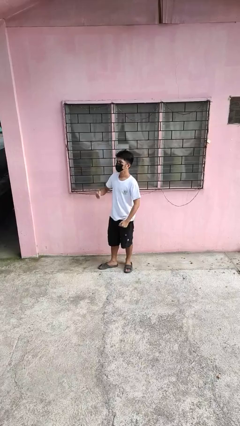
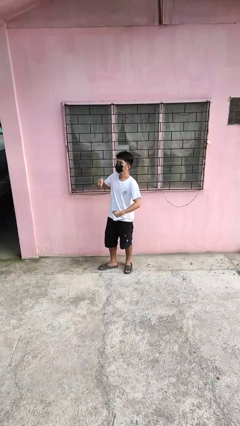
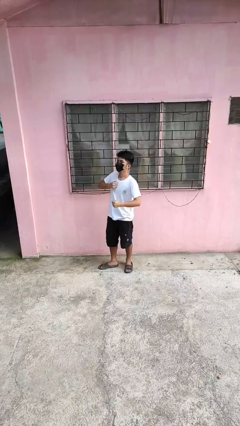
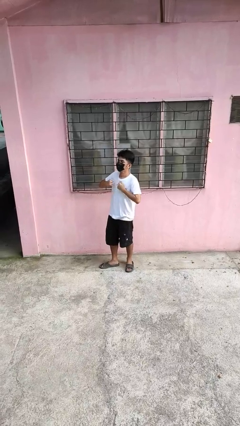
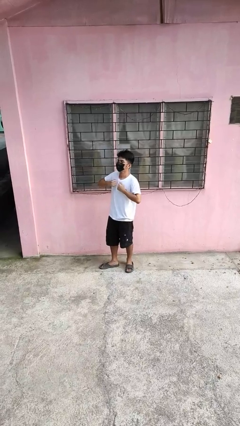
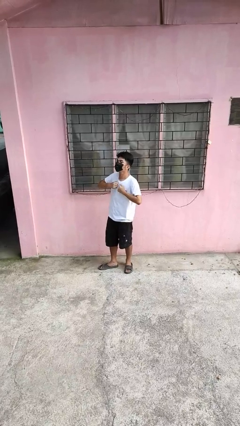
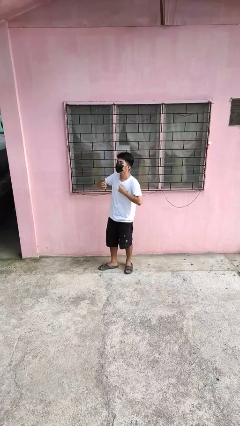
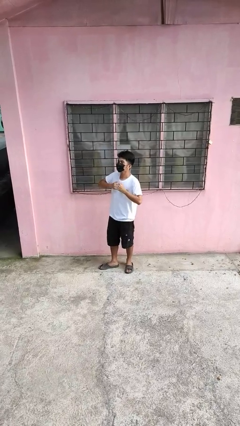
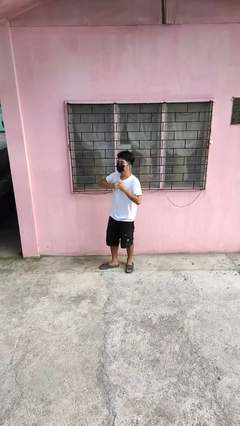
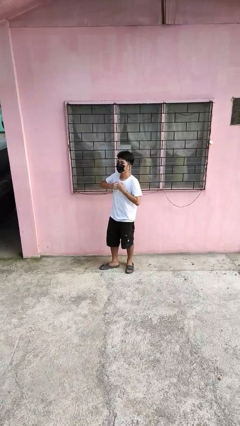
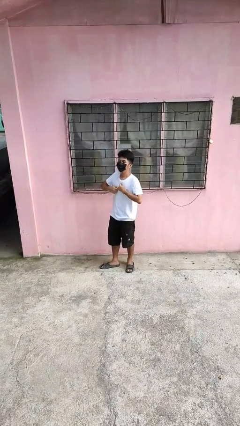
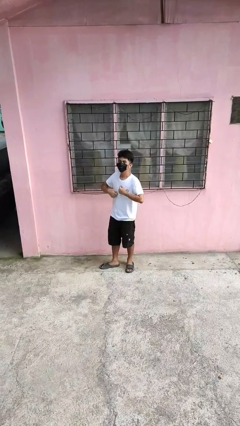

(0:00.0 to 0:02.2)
person drums on chest

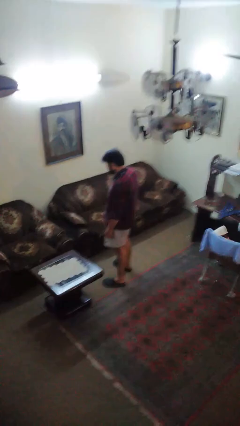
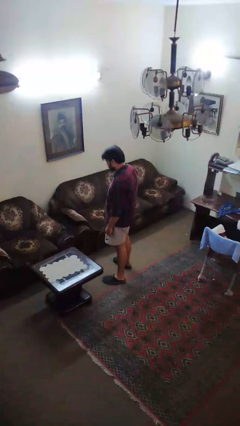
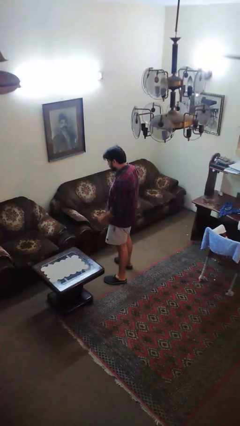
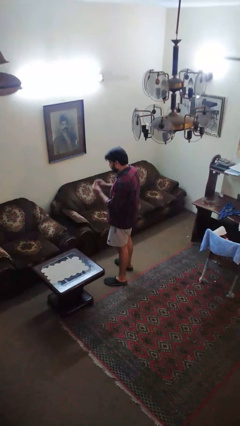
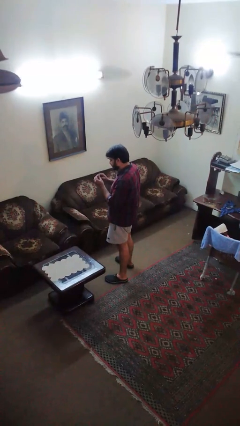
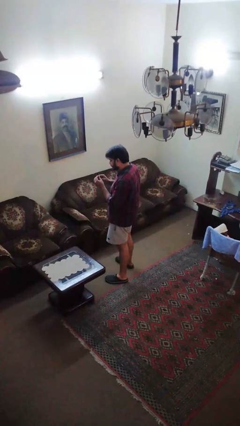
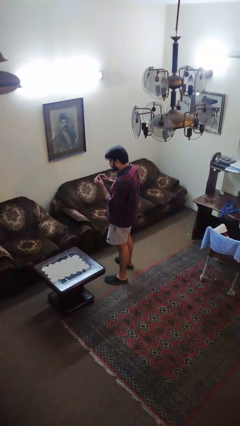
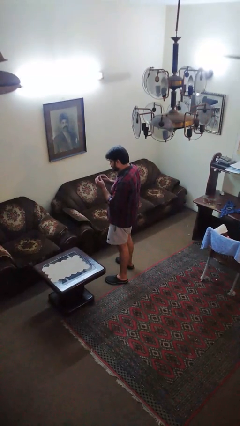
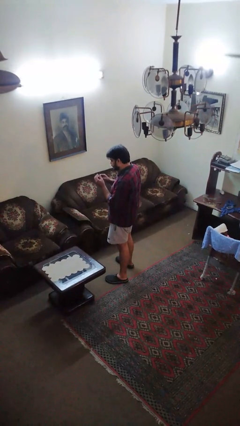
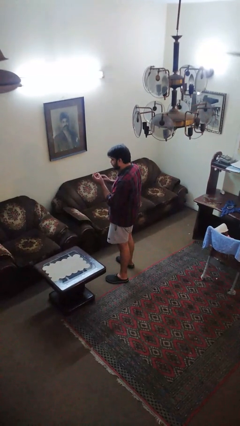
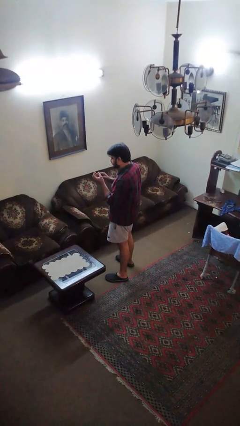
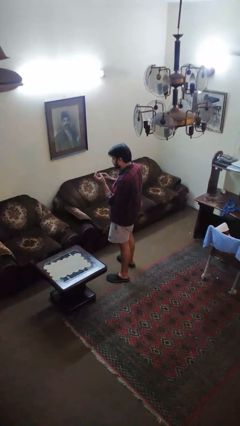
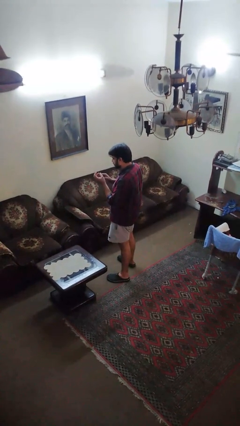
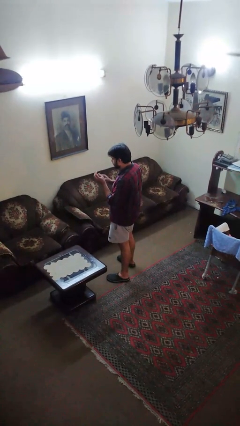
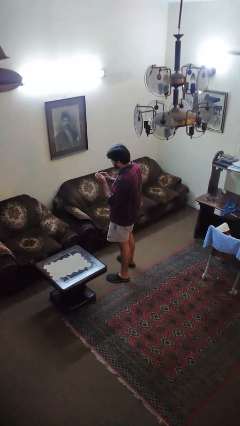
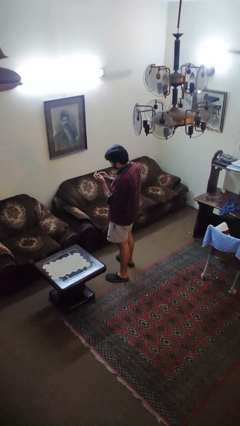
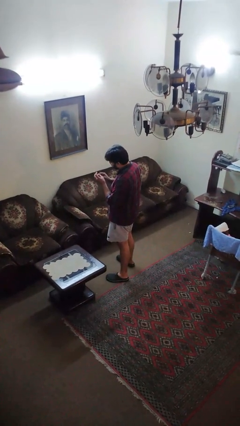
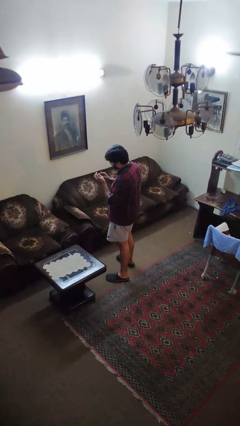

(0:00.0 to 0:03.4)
person files fingernails

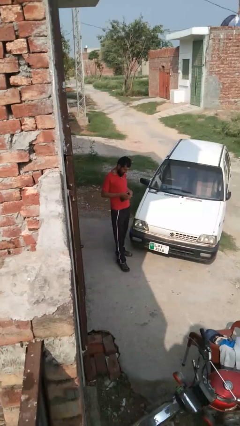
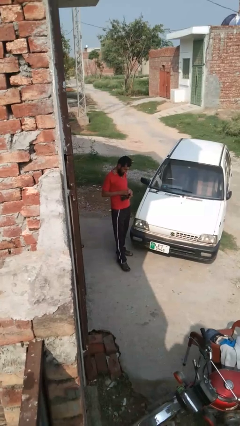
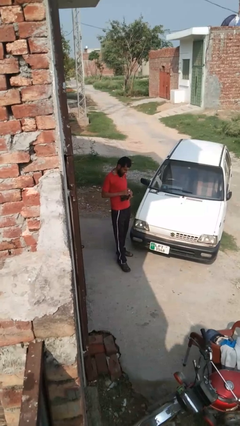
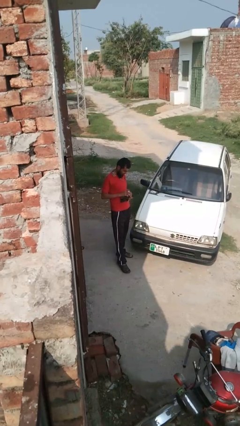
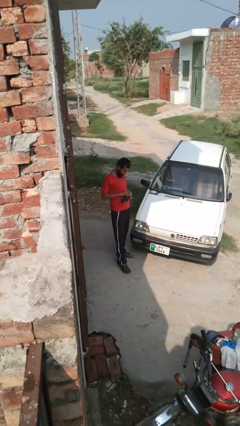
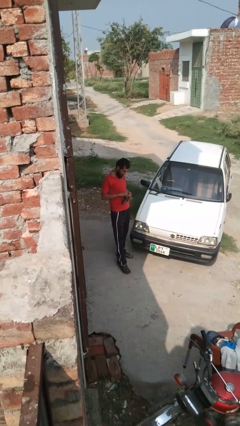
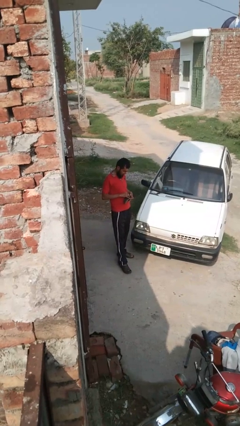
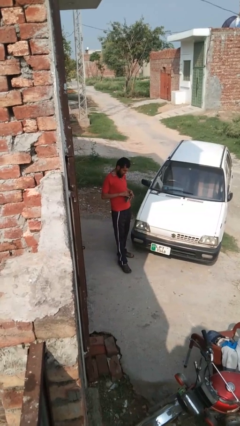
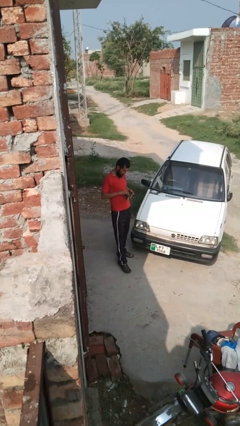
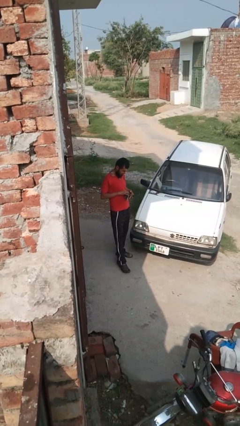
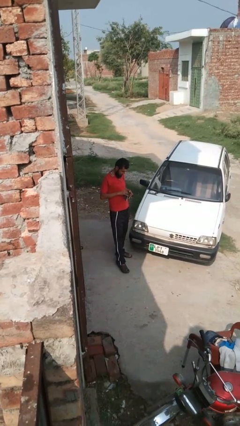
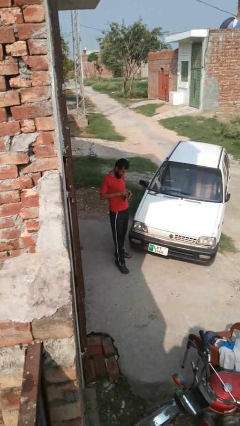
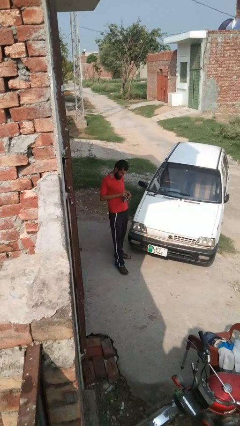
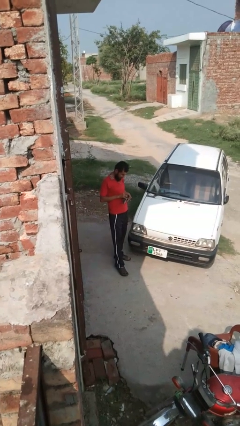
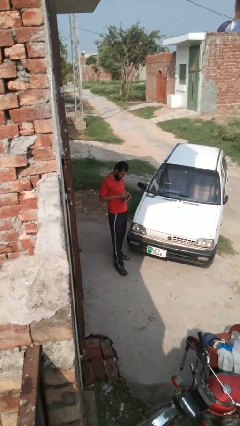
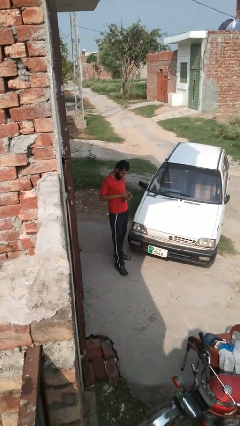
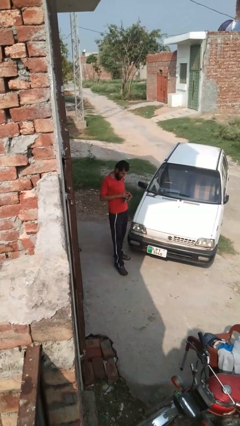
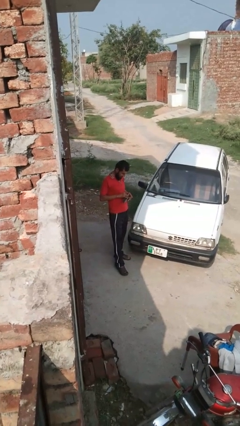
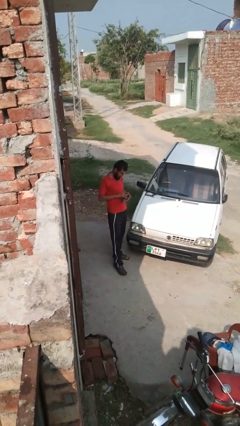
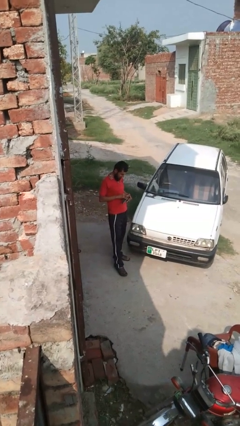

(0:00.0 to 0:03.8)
person searches in purse

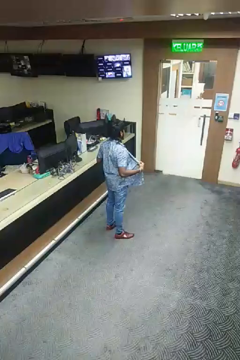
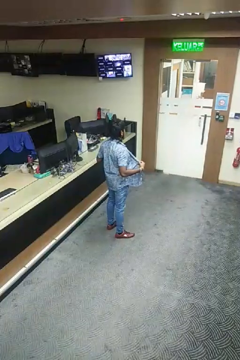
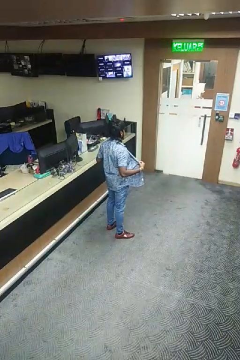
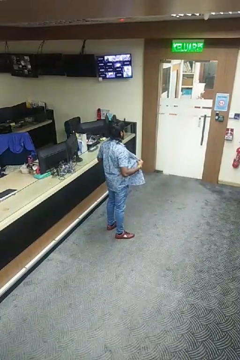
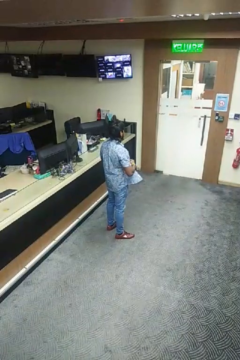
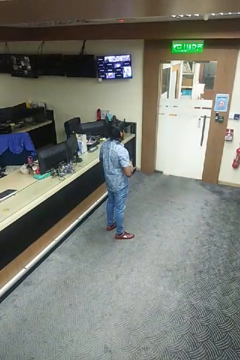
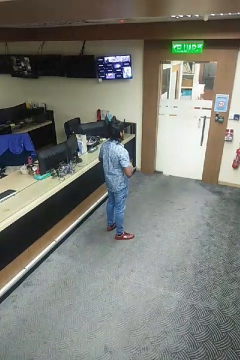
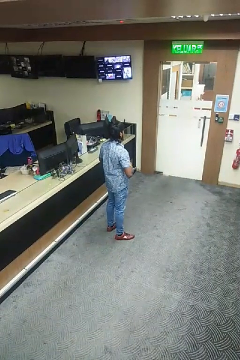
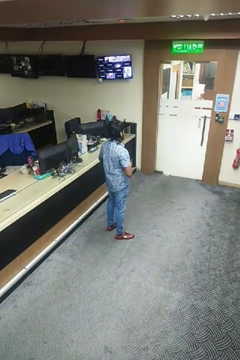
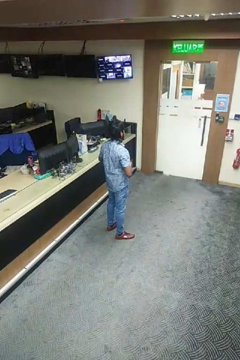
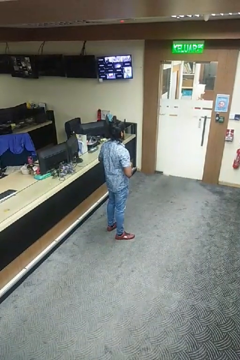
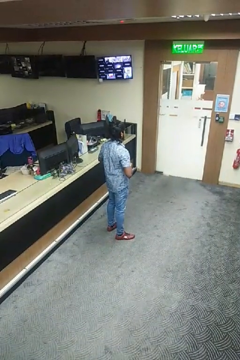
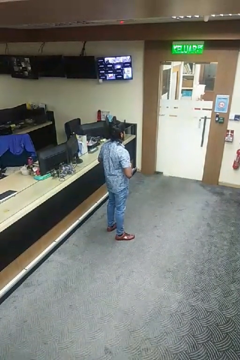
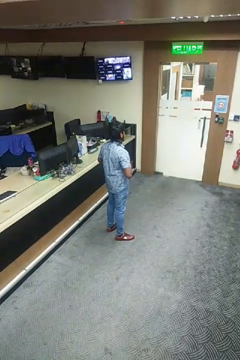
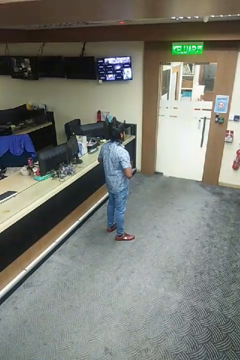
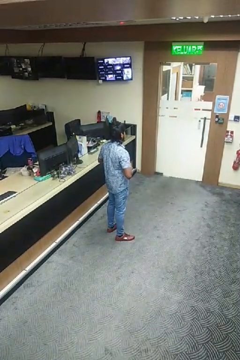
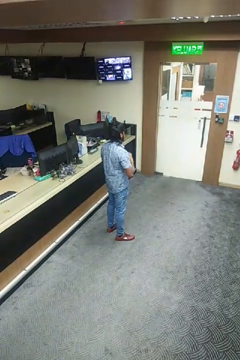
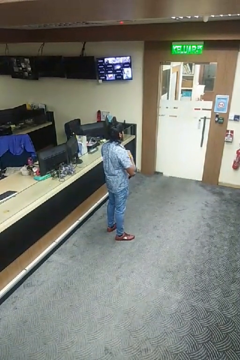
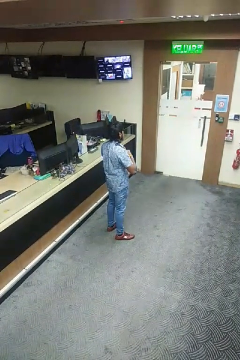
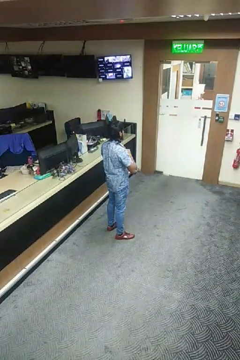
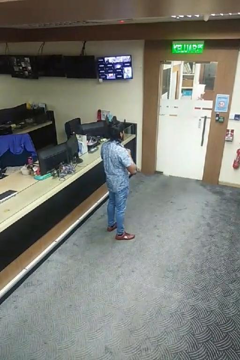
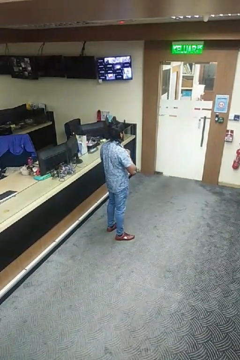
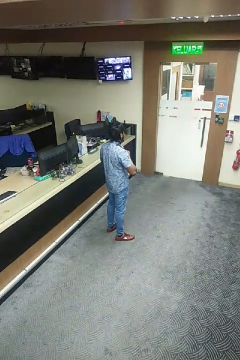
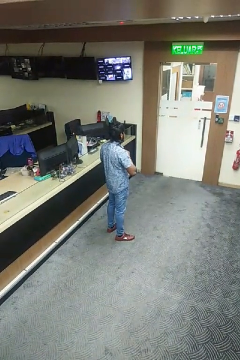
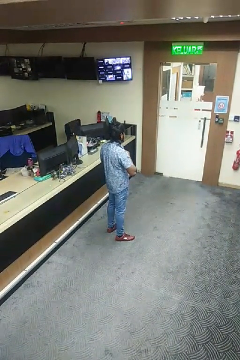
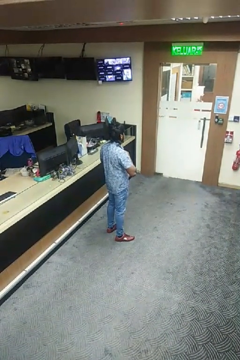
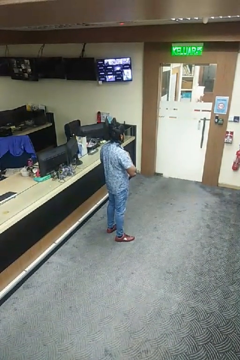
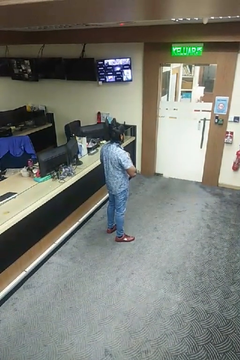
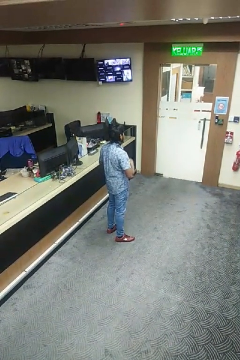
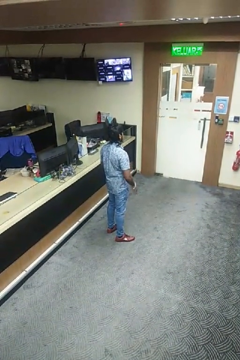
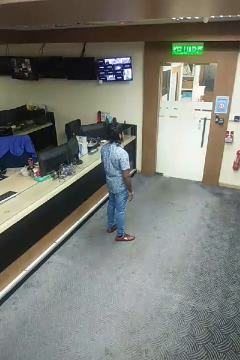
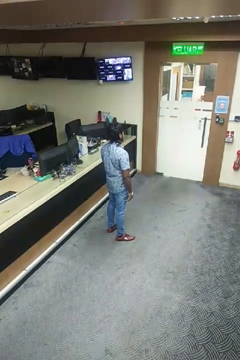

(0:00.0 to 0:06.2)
person buttons shirt

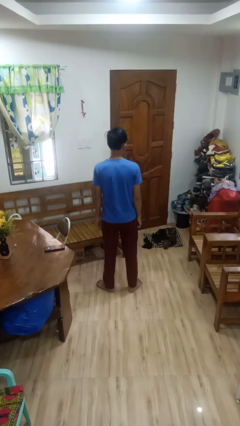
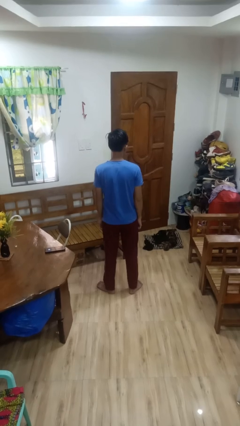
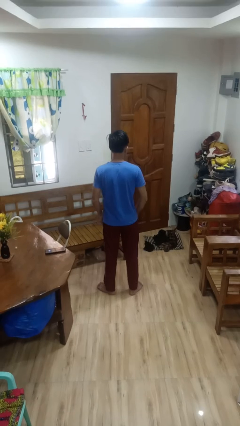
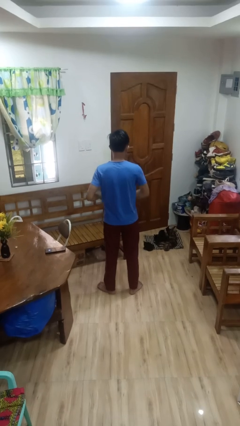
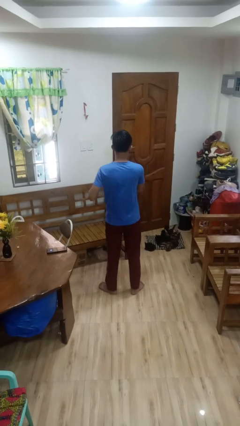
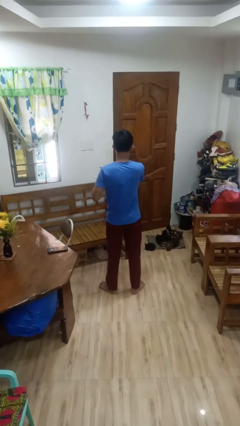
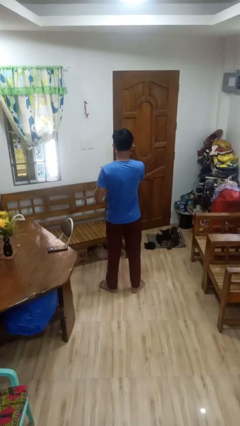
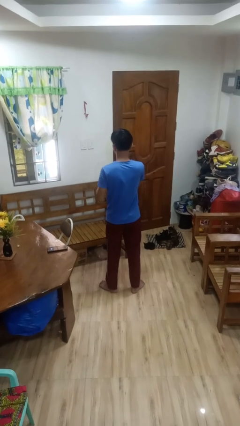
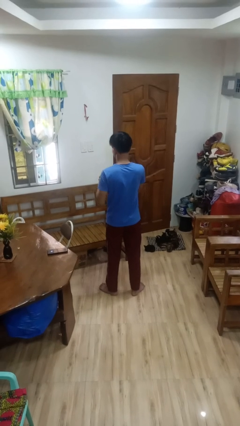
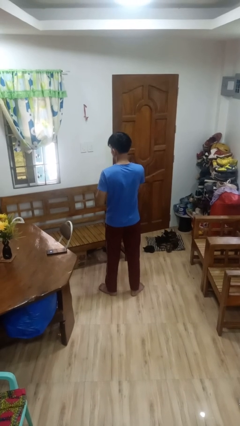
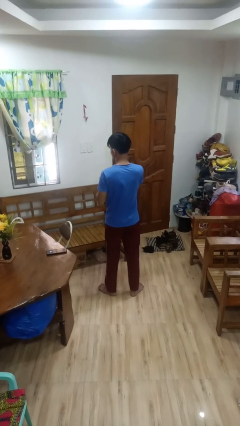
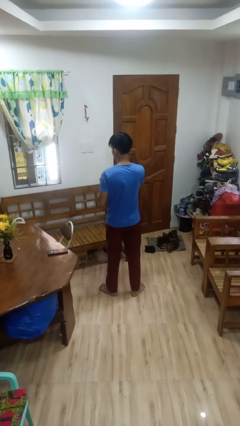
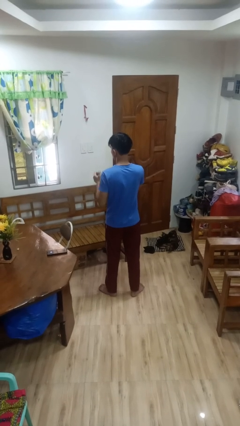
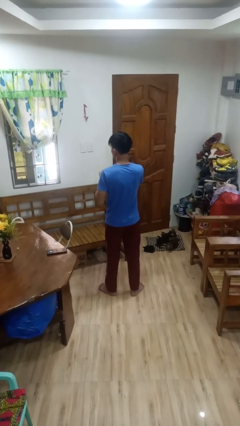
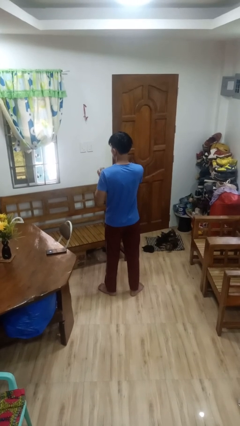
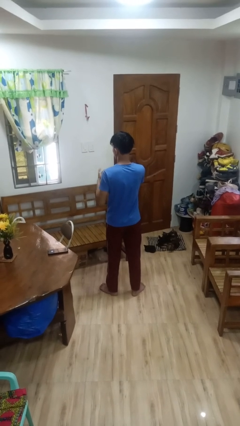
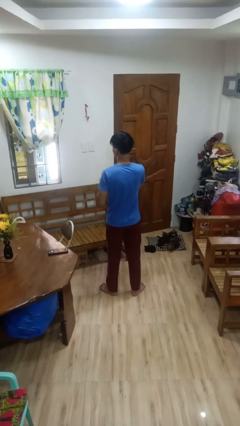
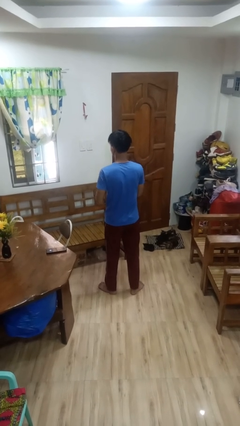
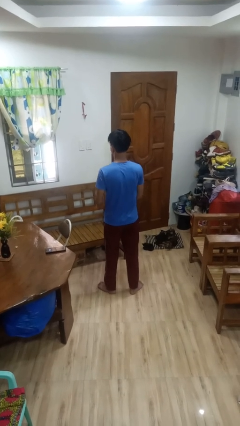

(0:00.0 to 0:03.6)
person cracks knuckles
